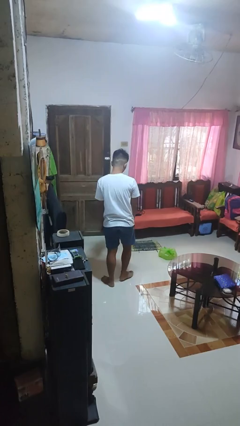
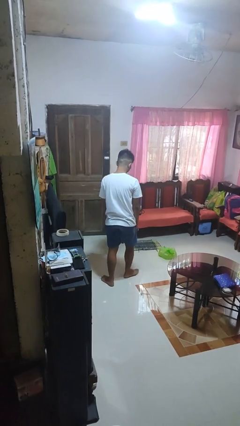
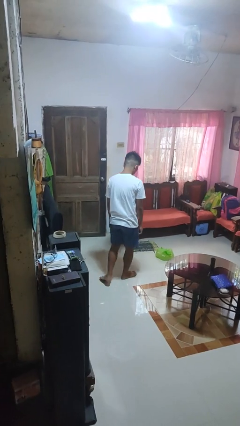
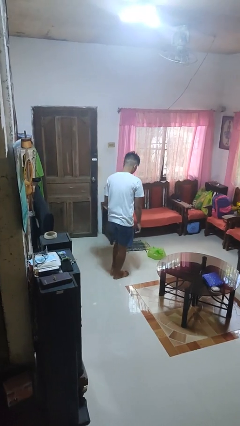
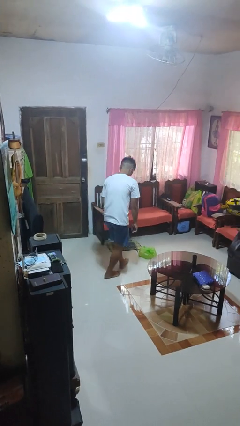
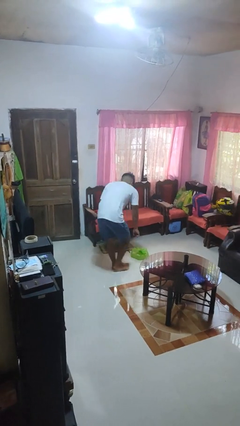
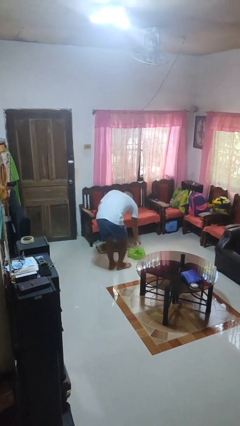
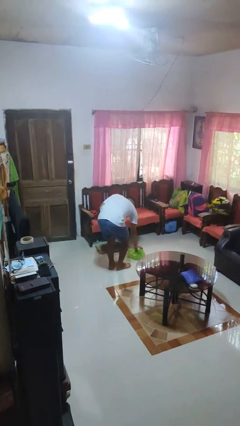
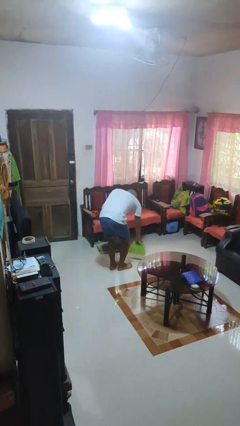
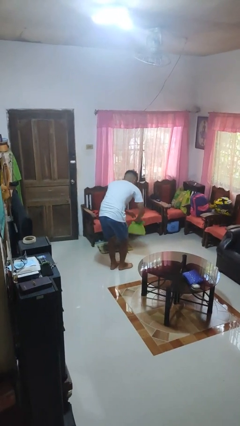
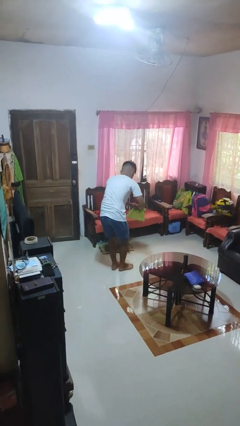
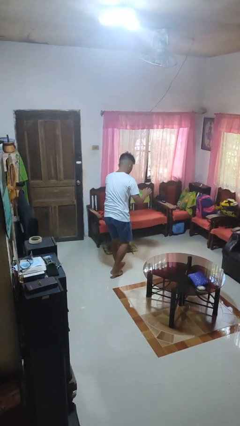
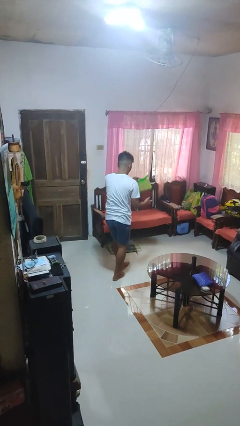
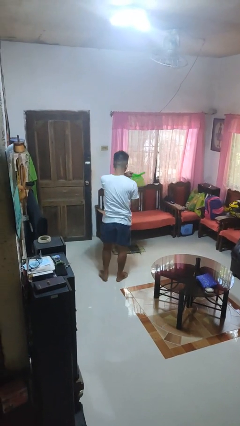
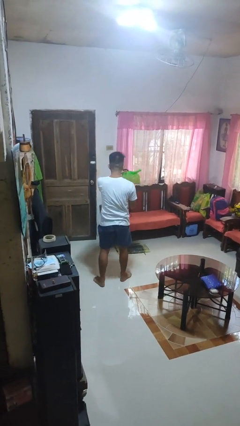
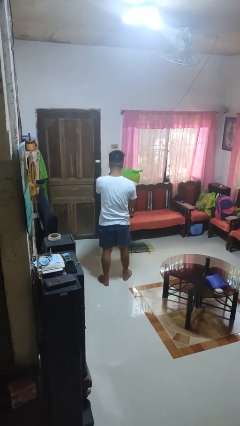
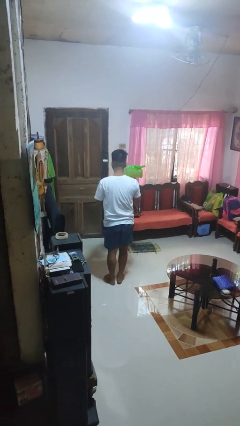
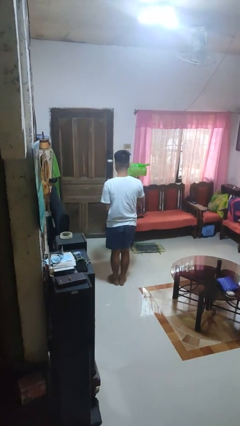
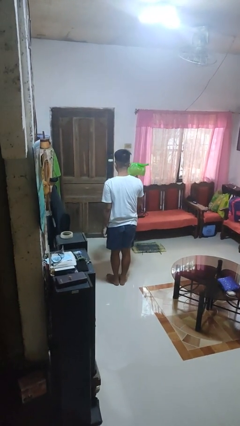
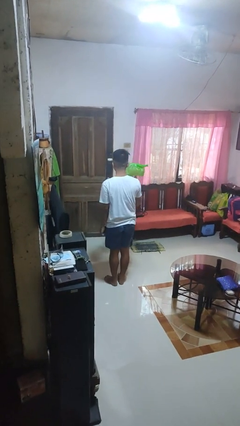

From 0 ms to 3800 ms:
person picks up object from floor

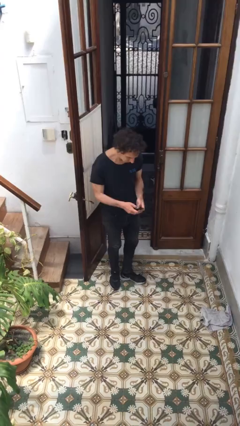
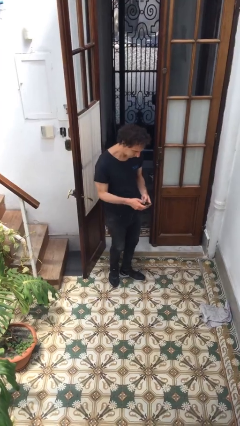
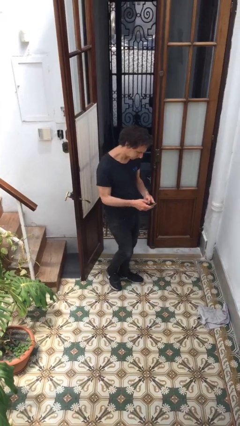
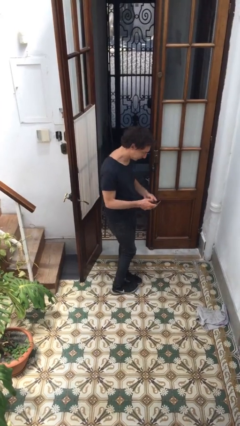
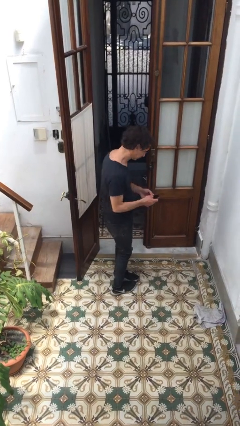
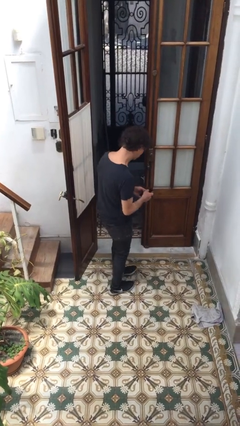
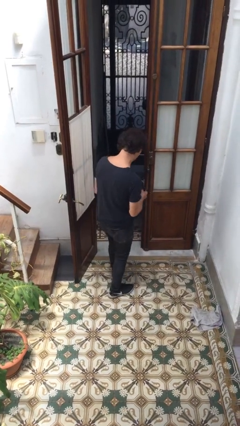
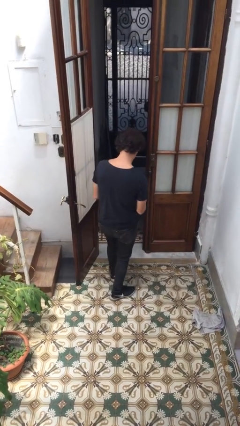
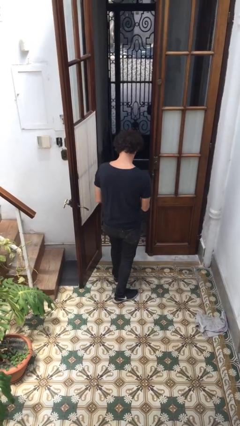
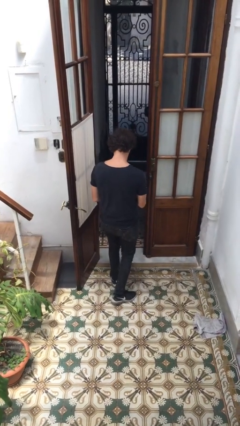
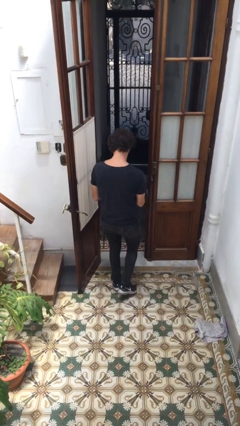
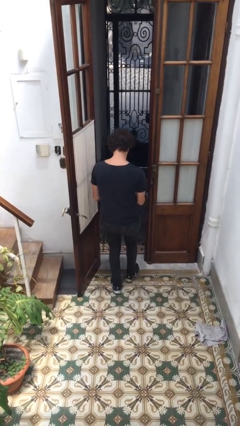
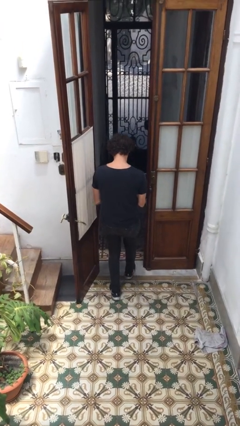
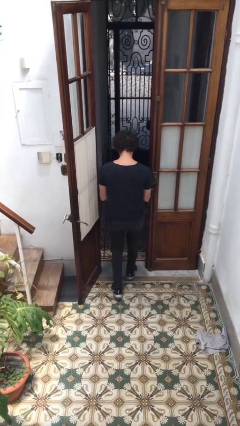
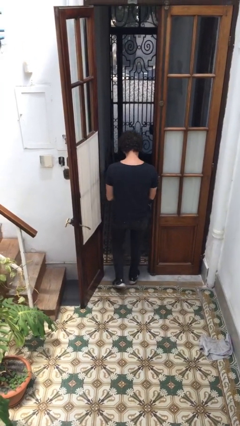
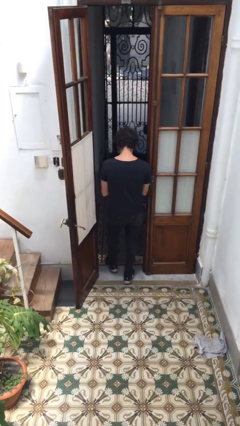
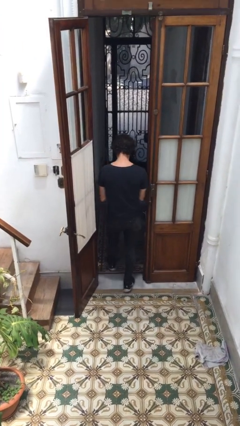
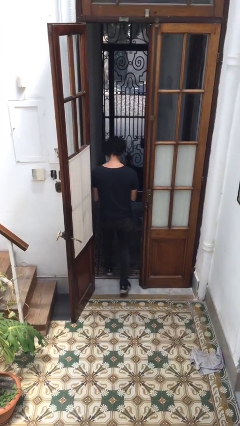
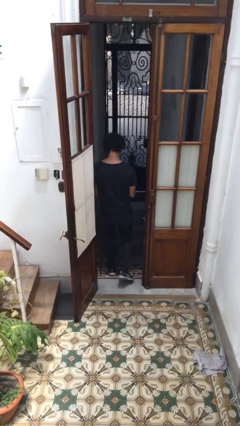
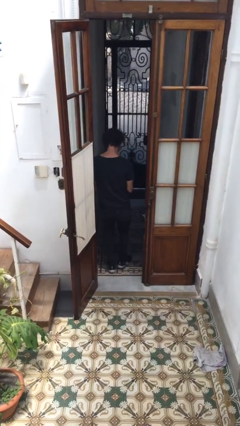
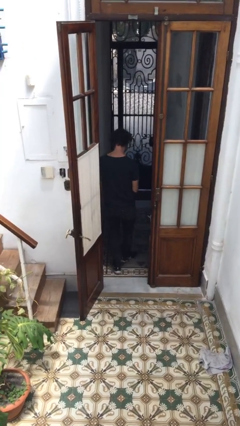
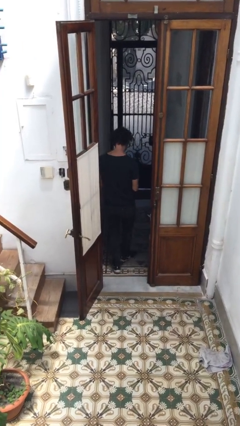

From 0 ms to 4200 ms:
person exits scene through structure

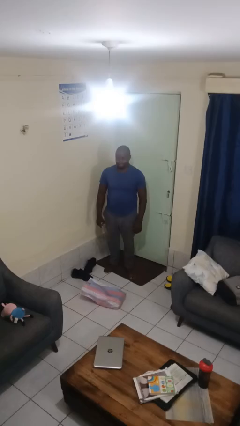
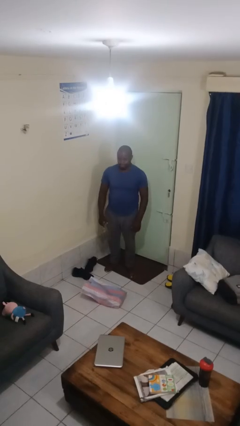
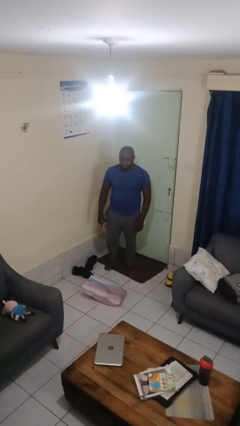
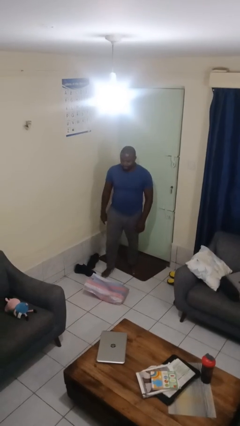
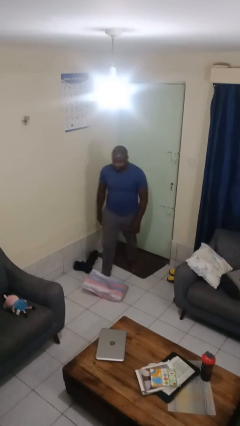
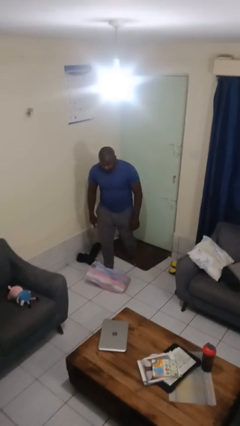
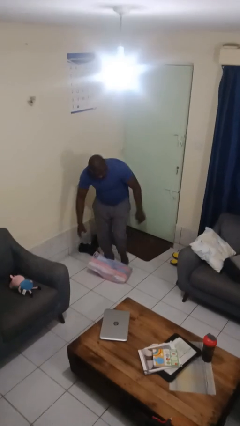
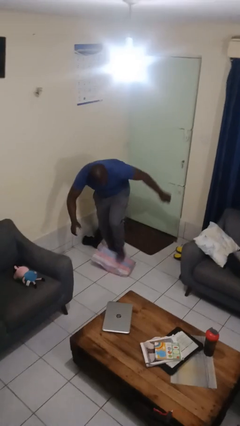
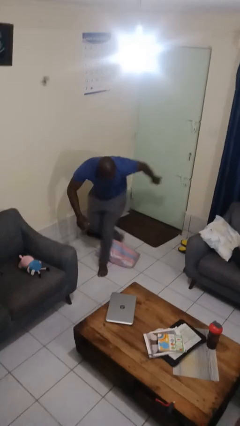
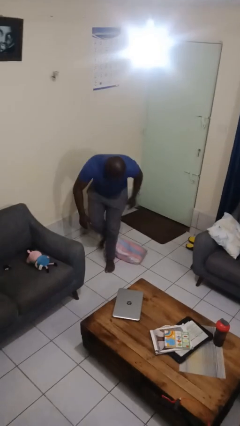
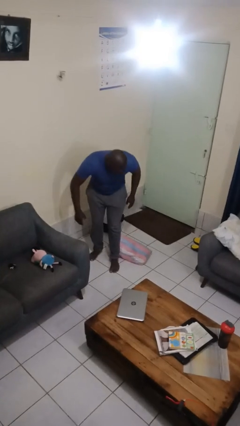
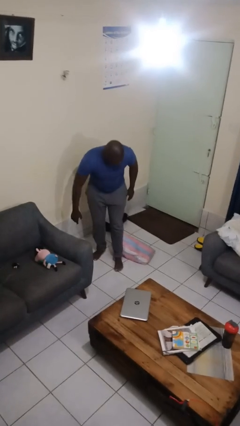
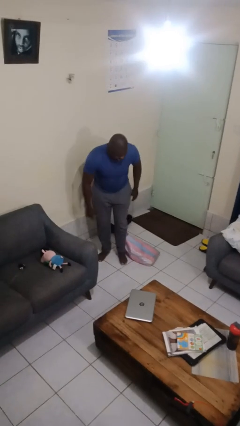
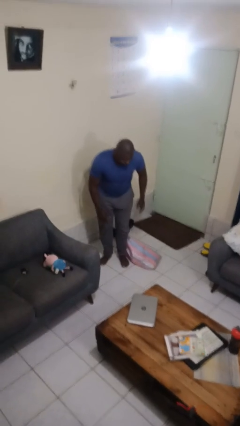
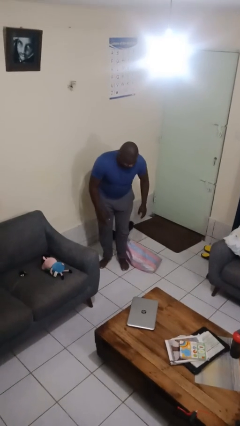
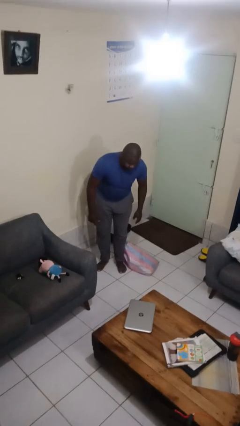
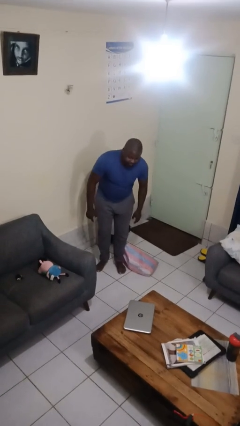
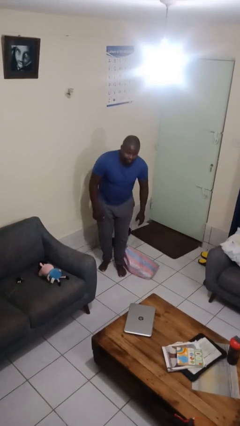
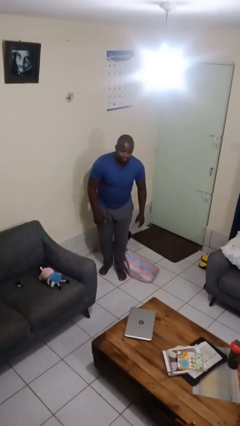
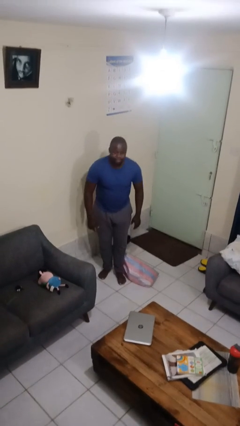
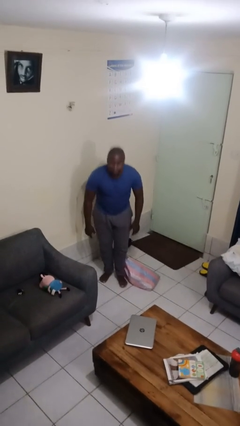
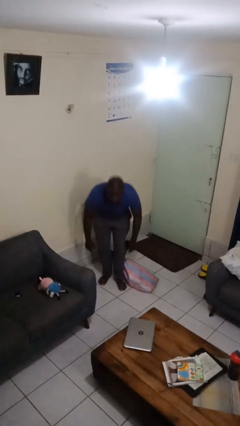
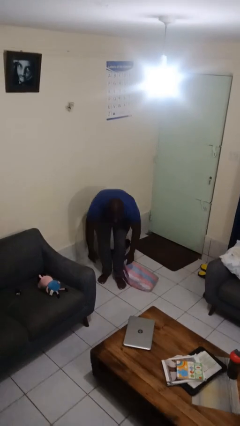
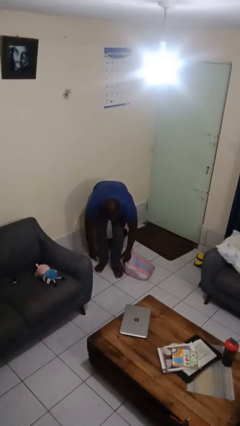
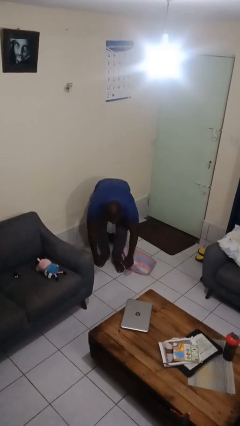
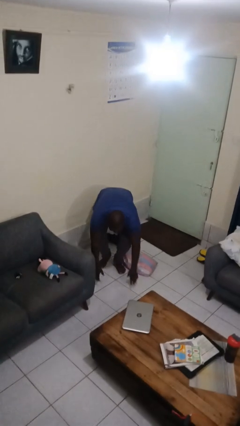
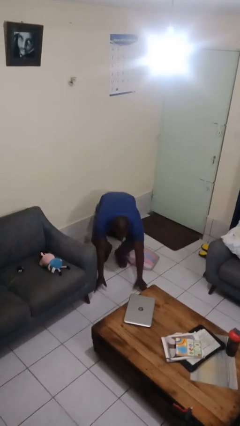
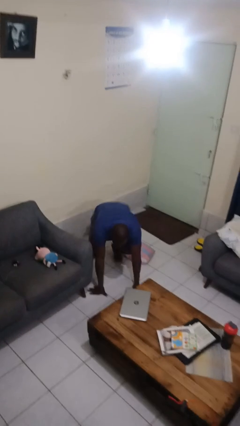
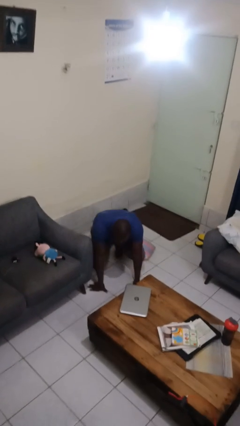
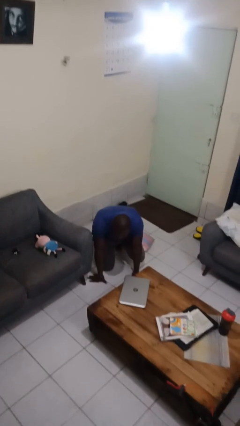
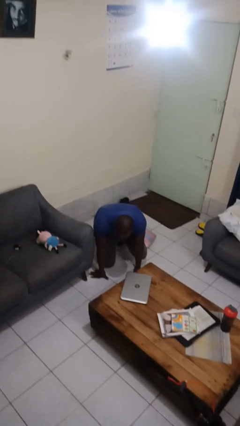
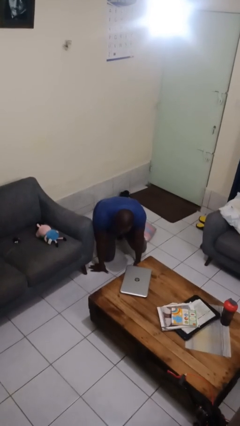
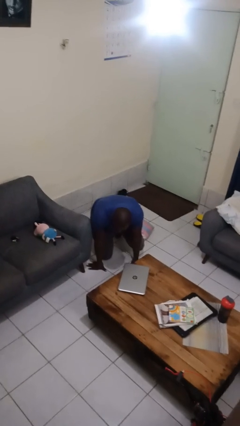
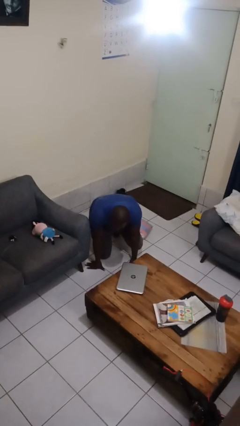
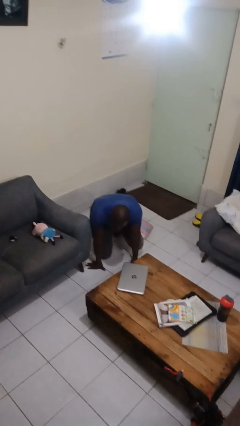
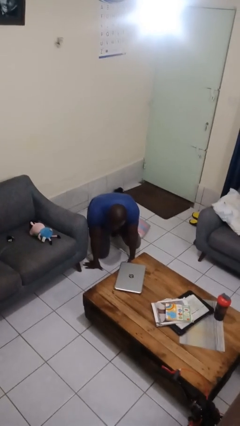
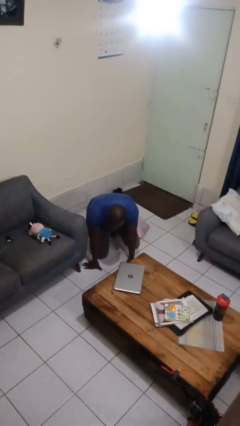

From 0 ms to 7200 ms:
person trips on object on floor

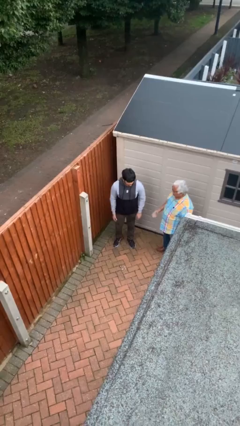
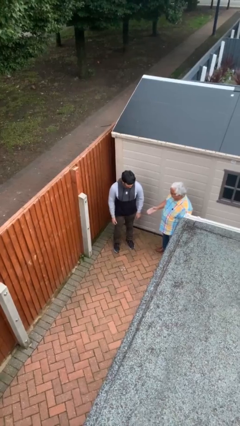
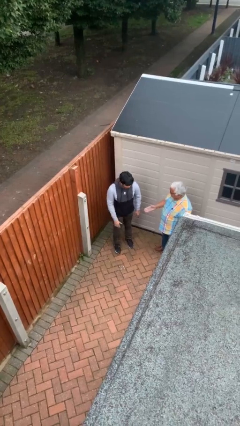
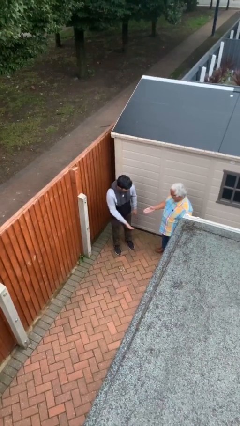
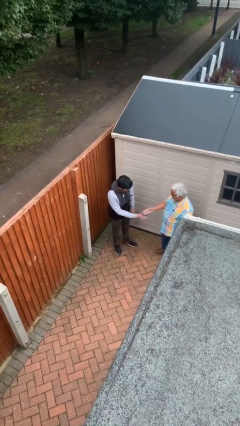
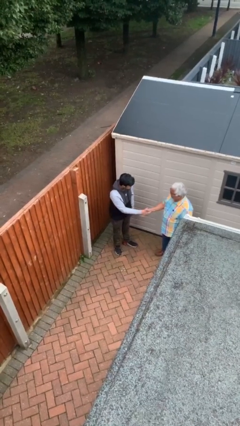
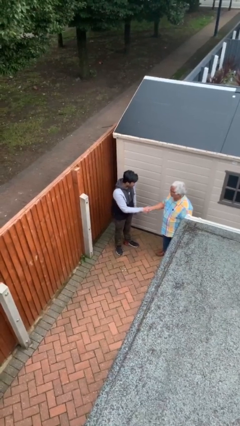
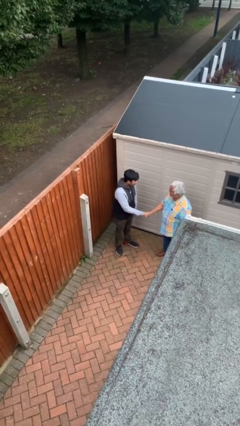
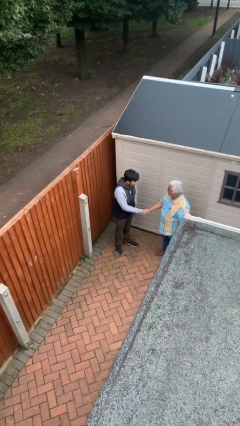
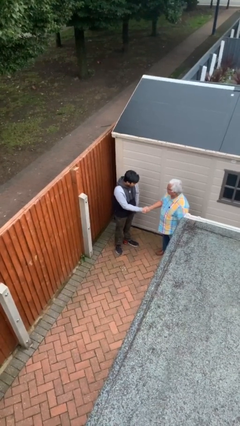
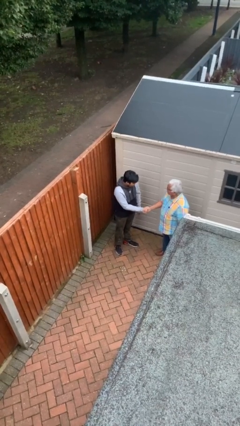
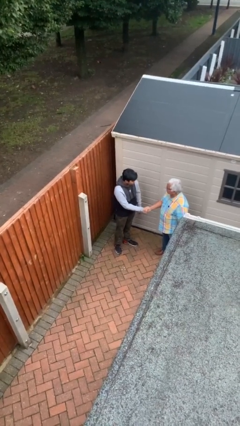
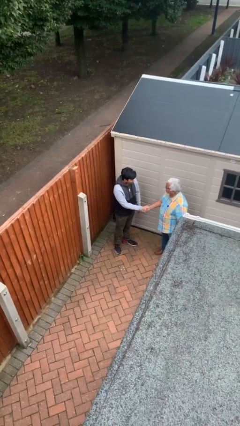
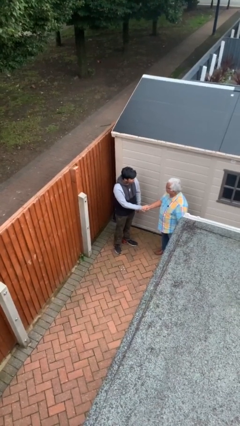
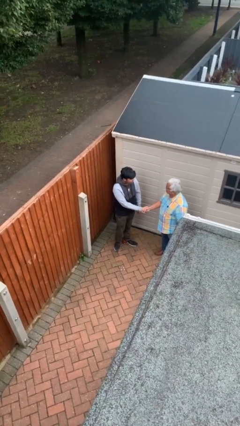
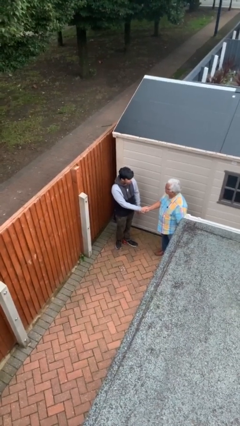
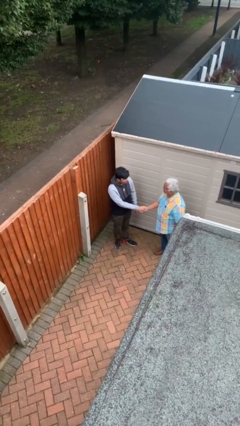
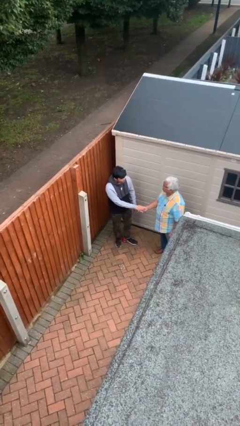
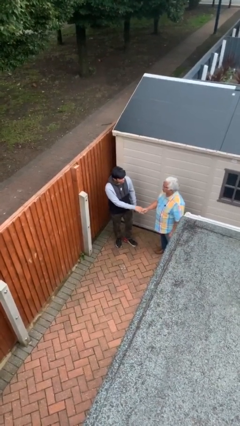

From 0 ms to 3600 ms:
person shakes hand
